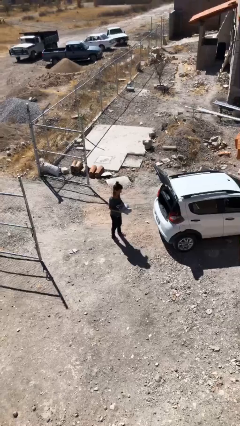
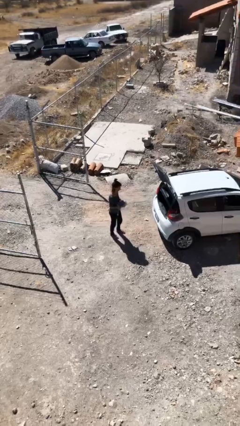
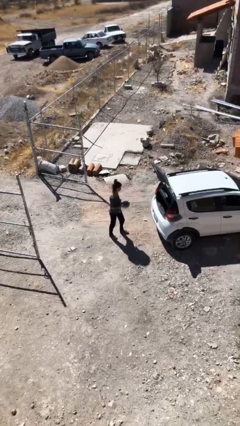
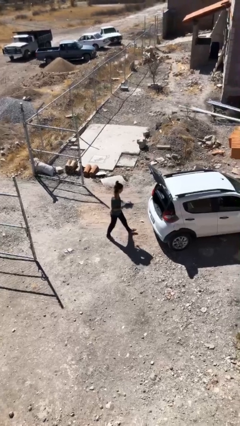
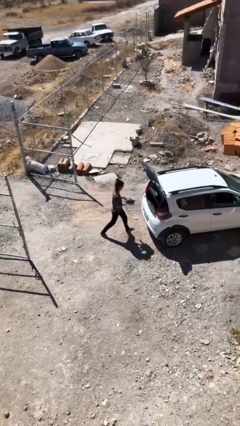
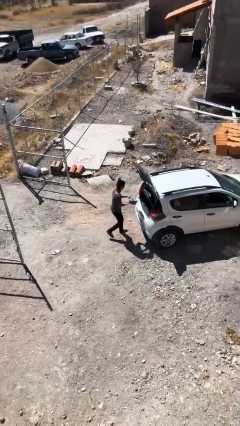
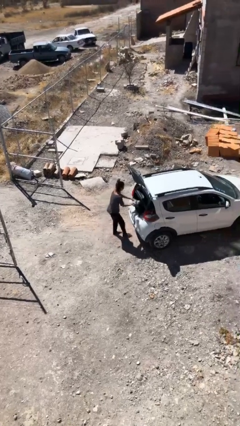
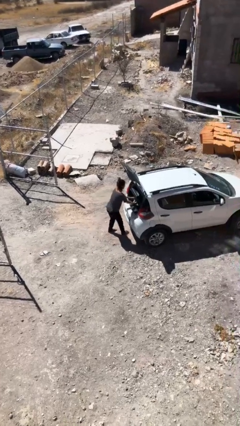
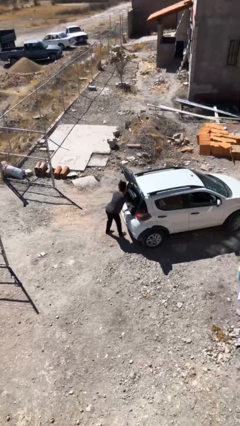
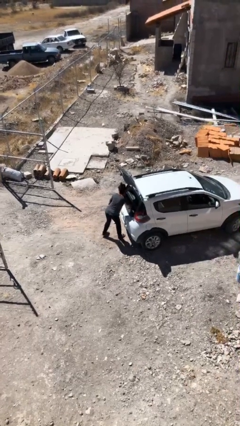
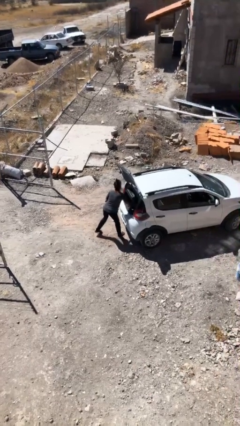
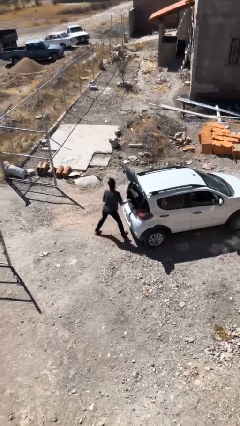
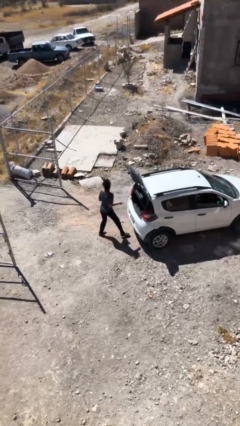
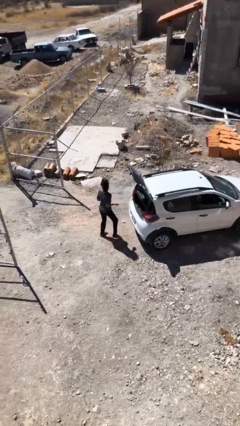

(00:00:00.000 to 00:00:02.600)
person loads car

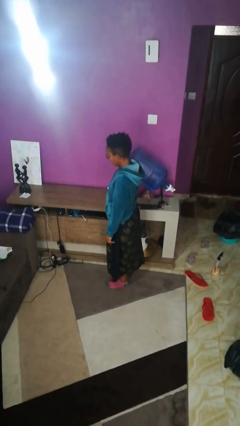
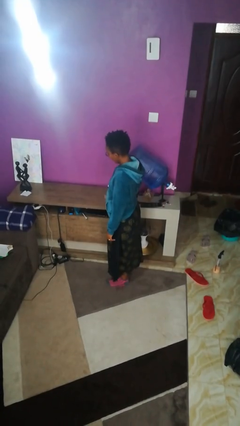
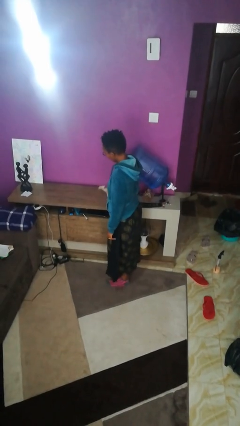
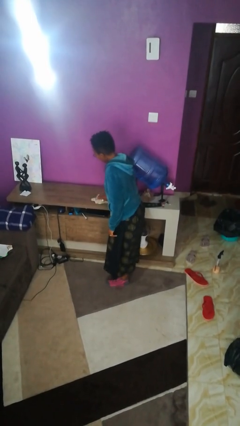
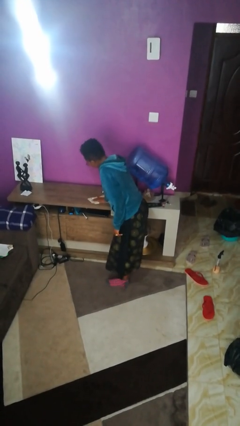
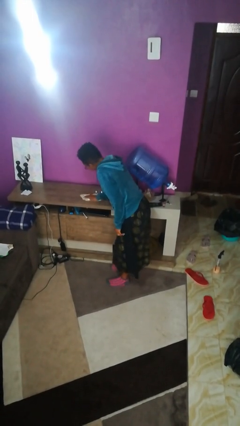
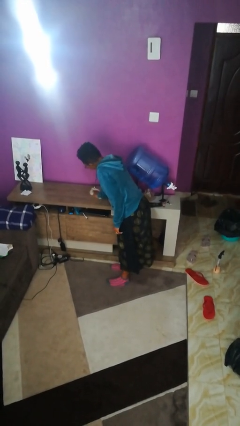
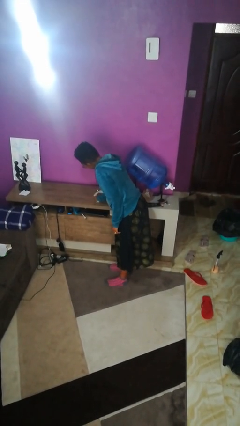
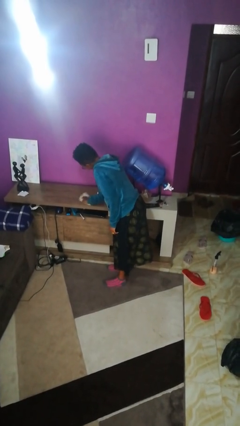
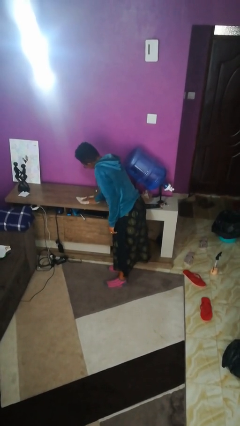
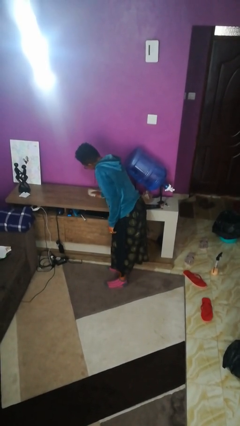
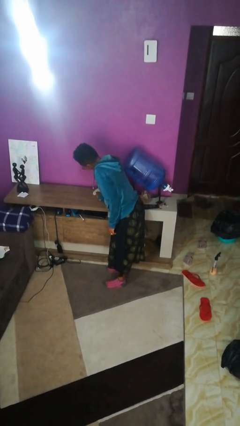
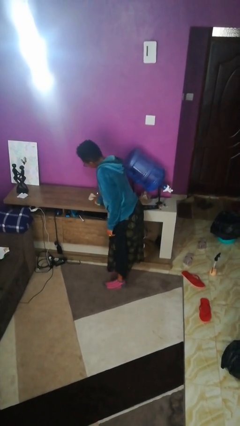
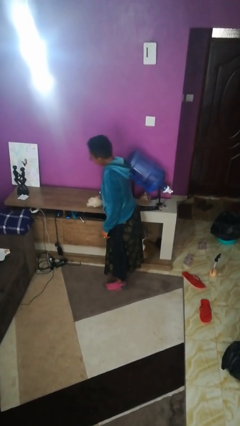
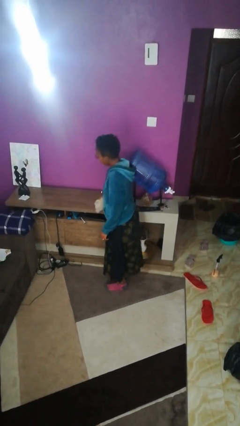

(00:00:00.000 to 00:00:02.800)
person cleans table with rag

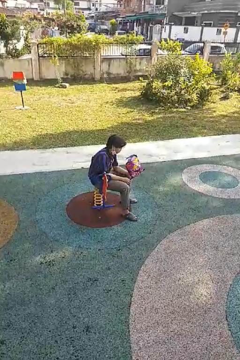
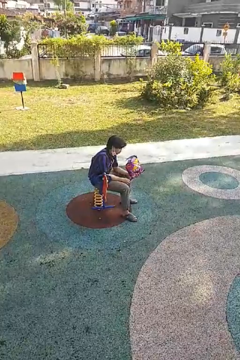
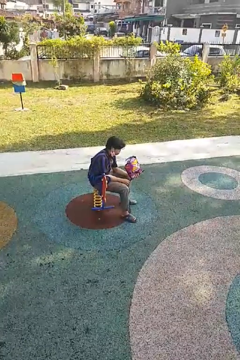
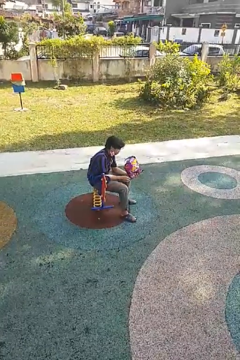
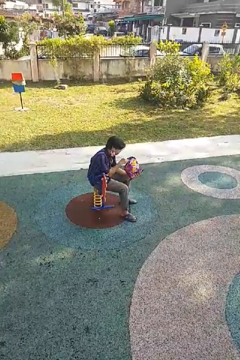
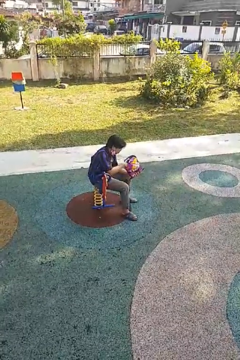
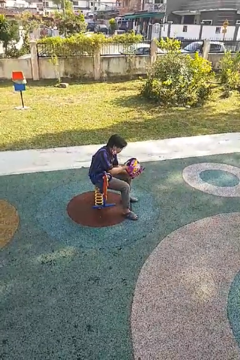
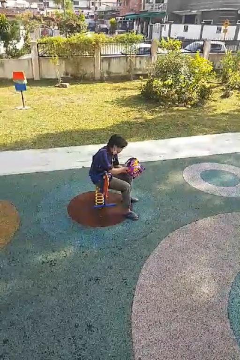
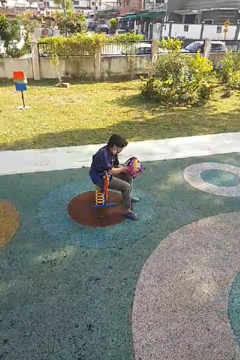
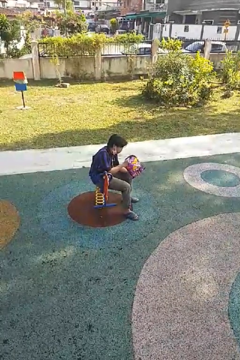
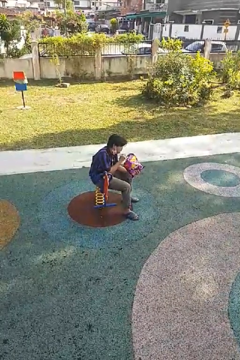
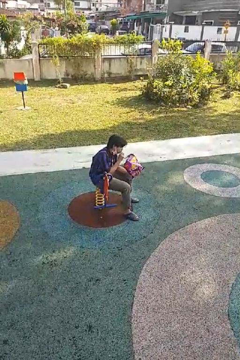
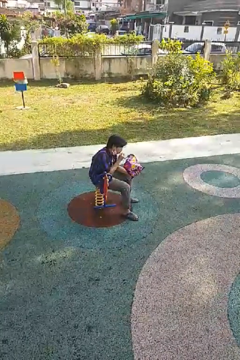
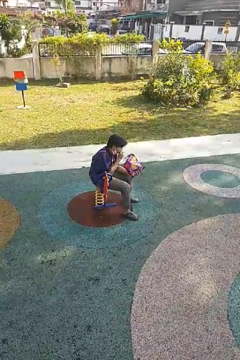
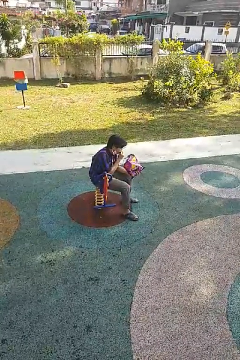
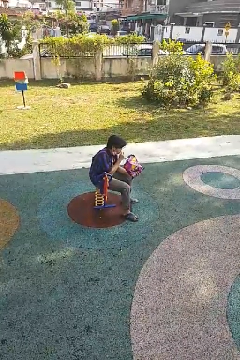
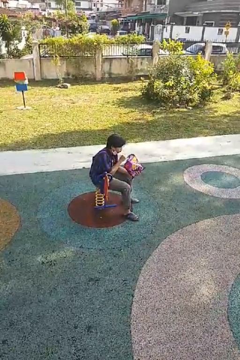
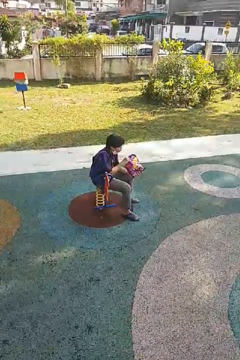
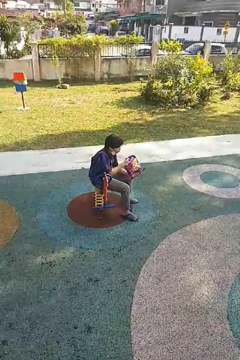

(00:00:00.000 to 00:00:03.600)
person eats snack from bag

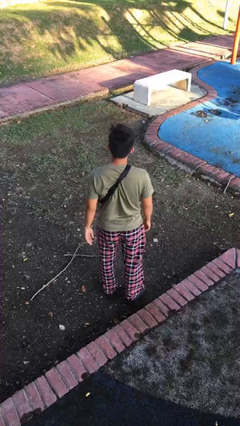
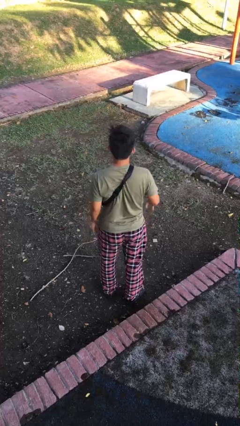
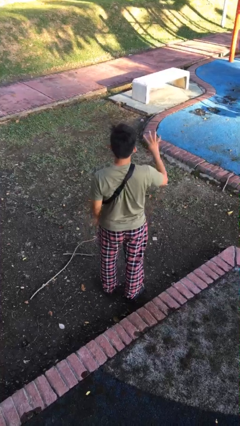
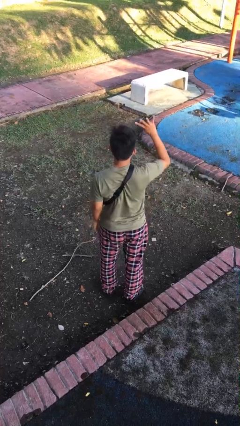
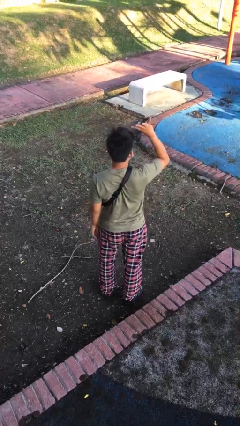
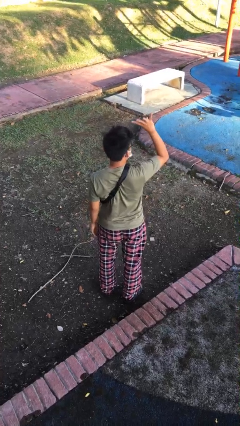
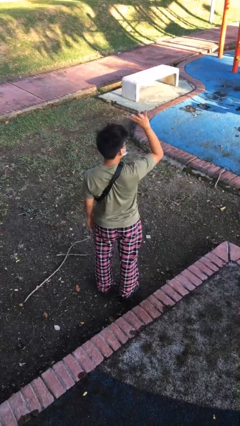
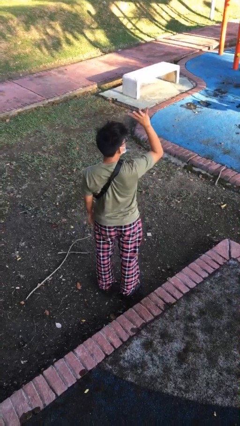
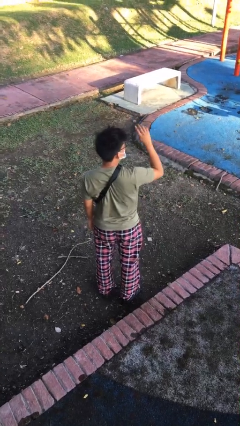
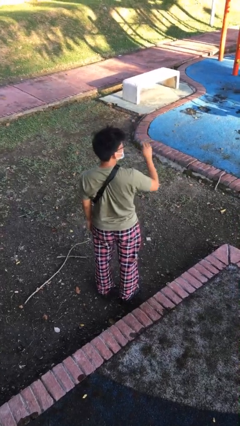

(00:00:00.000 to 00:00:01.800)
person gestures number four

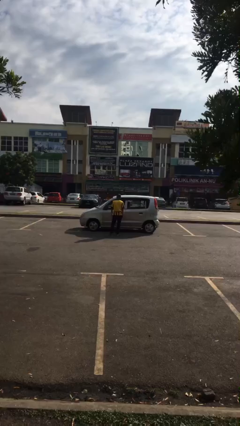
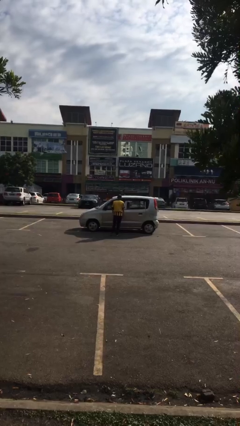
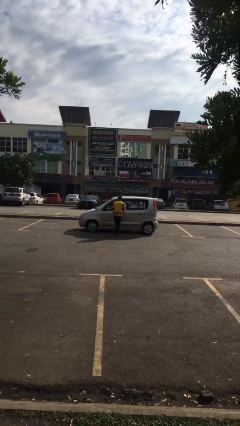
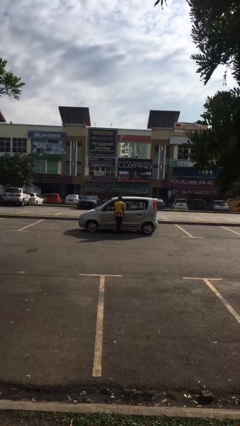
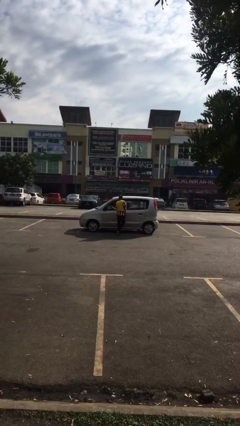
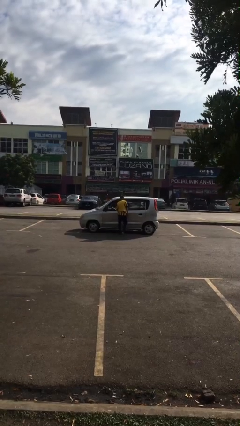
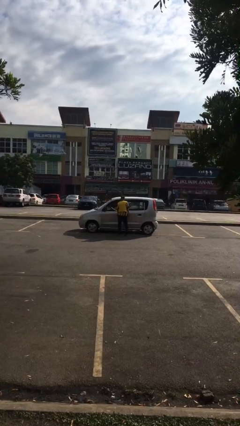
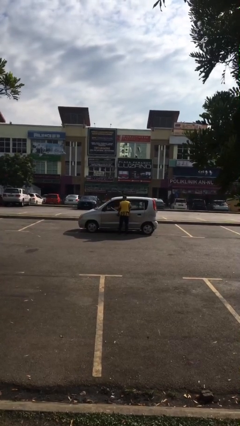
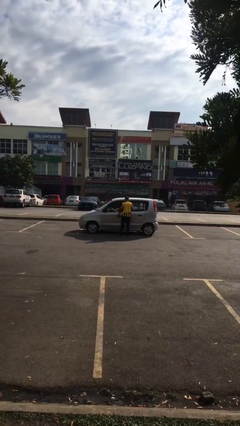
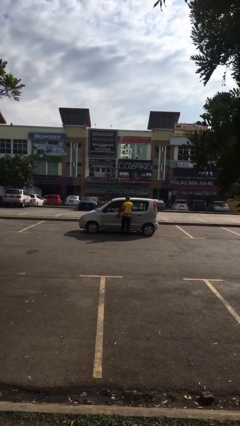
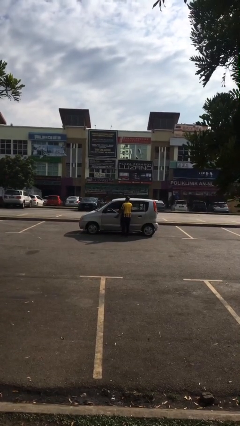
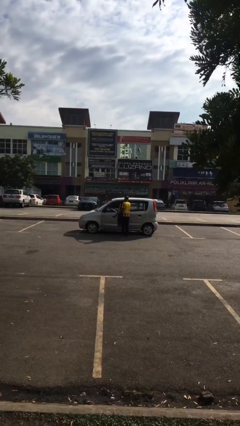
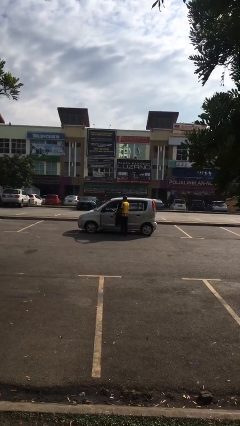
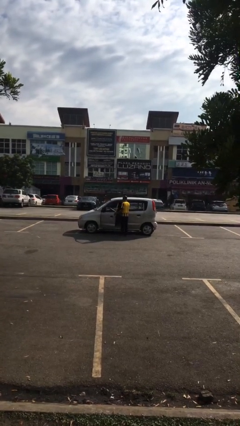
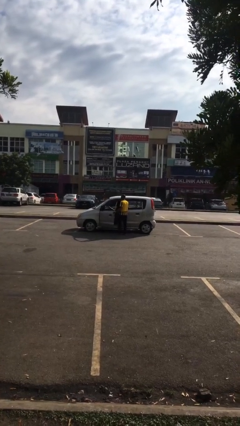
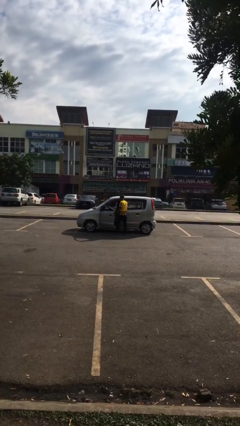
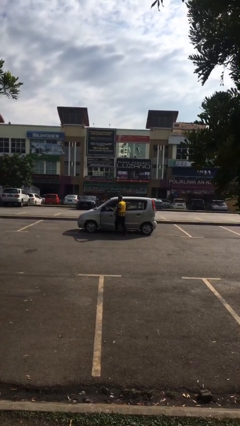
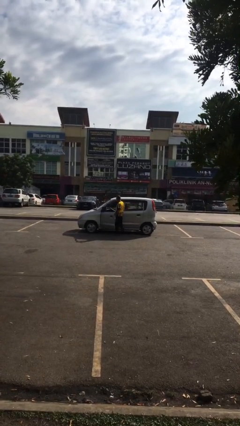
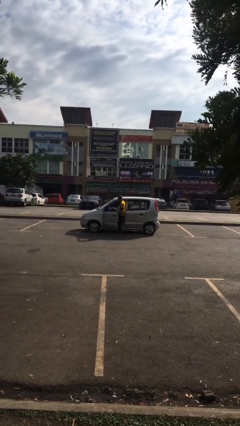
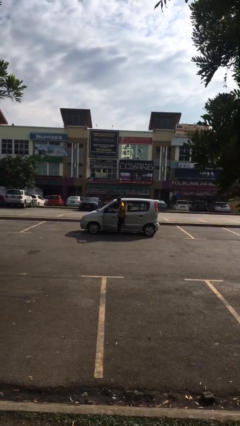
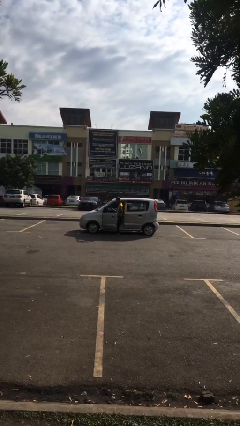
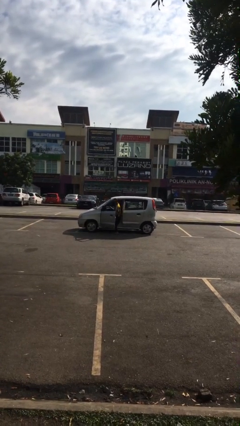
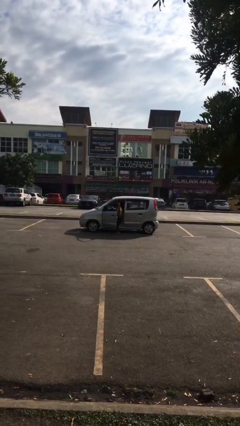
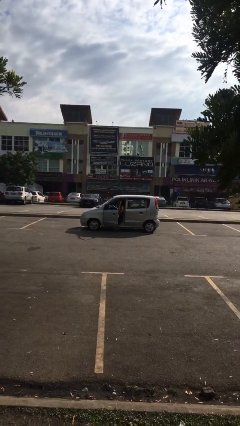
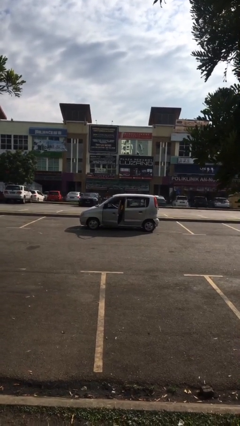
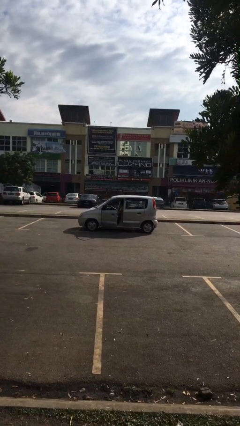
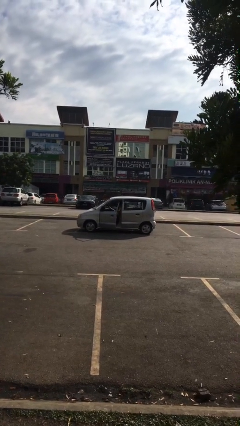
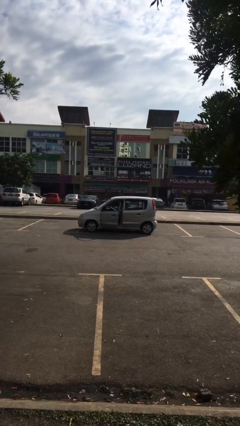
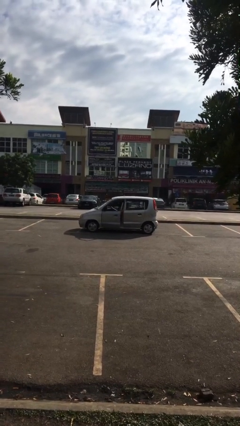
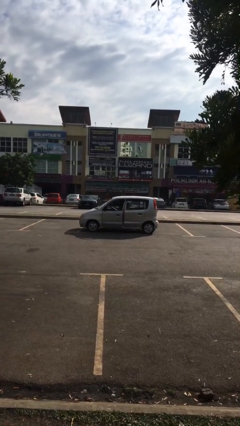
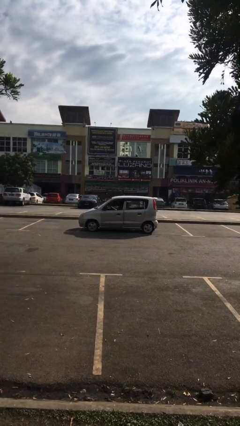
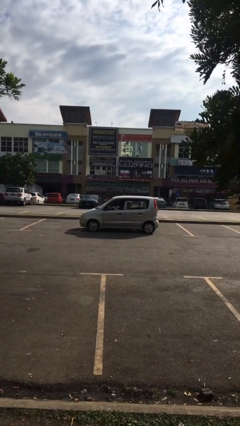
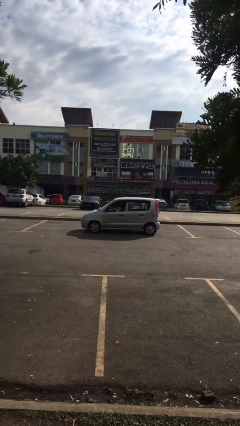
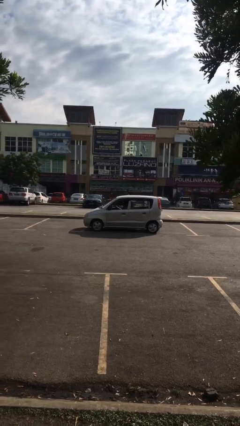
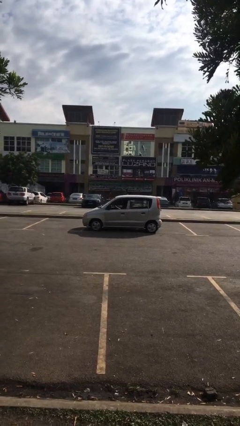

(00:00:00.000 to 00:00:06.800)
car picks up person
